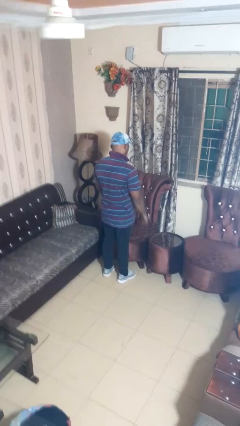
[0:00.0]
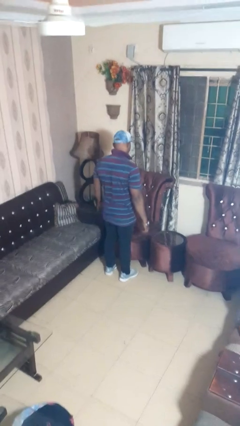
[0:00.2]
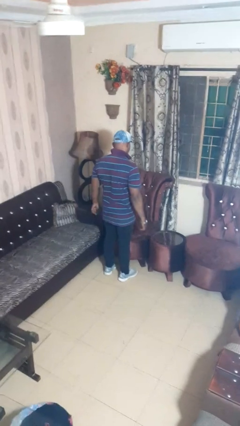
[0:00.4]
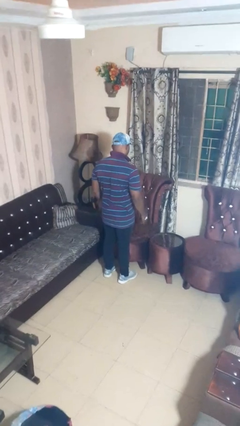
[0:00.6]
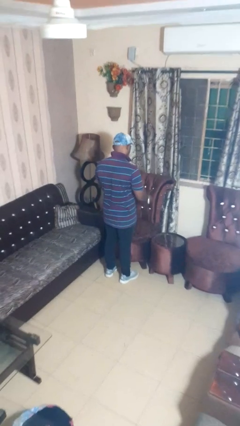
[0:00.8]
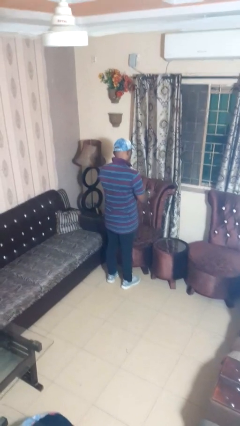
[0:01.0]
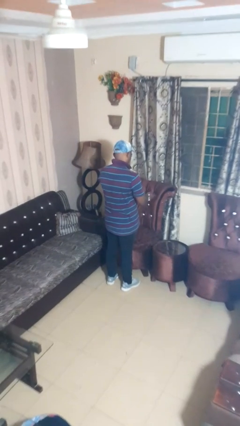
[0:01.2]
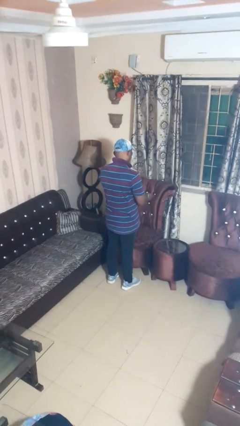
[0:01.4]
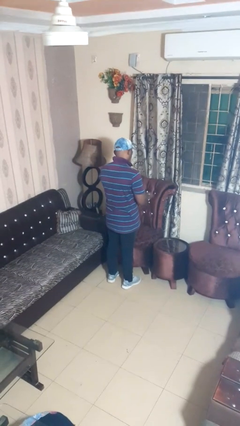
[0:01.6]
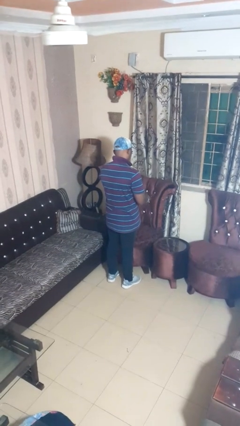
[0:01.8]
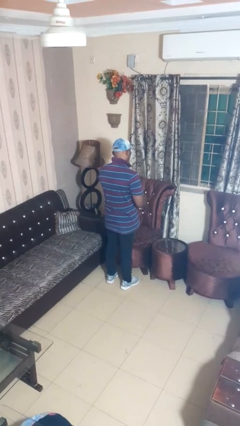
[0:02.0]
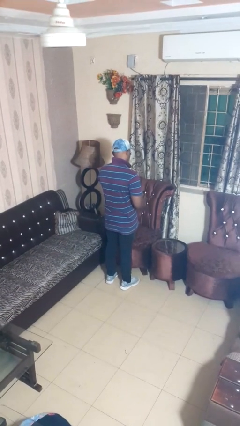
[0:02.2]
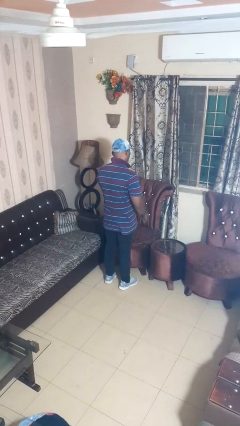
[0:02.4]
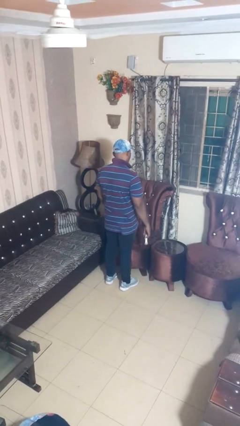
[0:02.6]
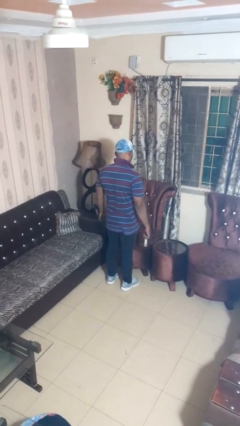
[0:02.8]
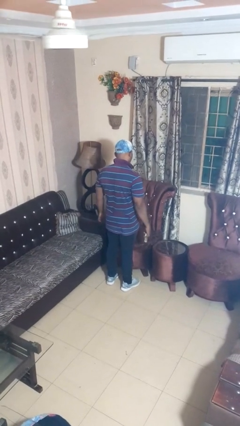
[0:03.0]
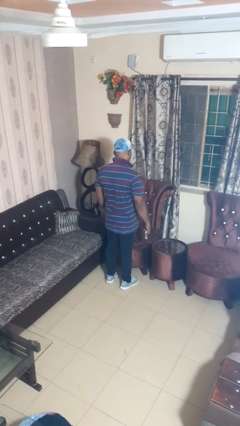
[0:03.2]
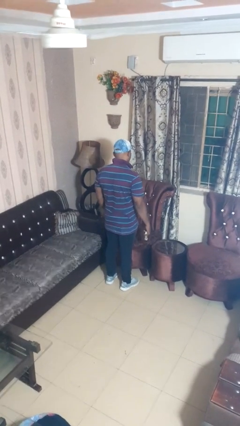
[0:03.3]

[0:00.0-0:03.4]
person takes off wristwatch

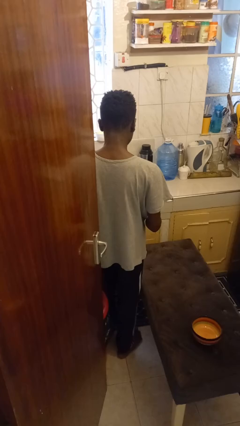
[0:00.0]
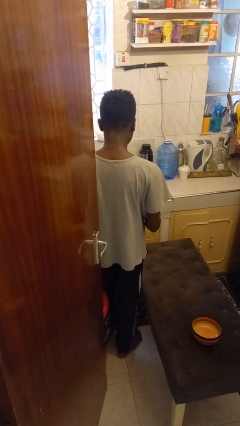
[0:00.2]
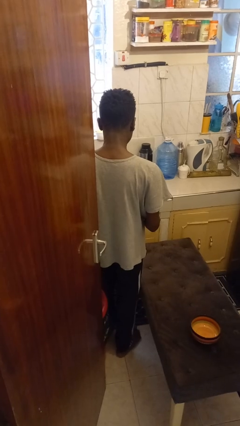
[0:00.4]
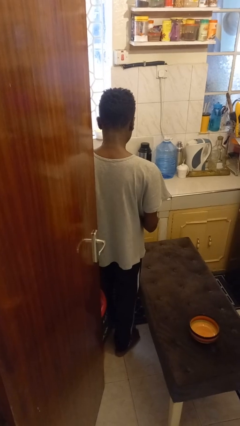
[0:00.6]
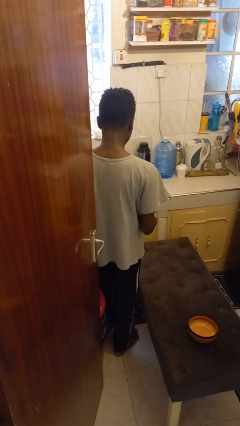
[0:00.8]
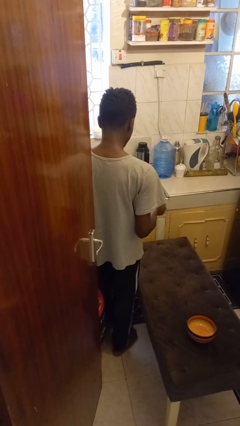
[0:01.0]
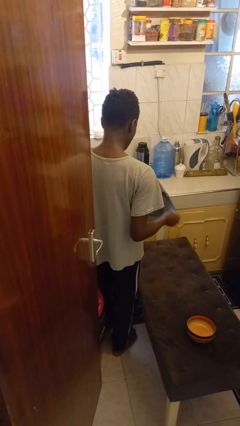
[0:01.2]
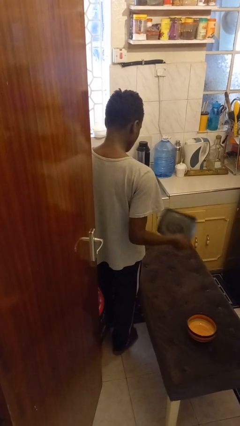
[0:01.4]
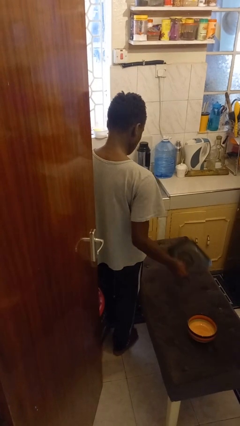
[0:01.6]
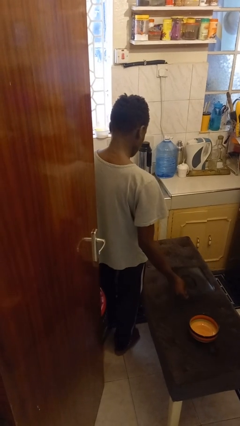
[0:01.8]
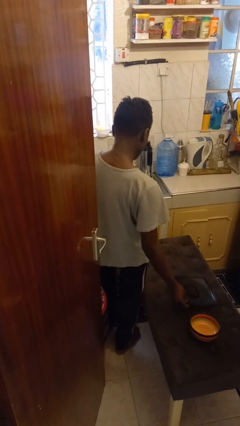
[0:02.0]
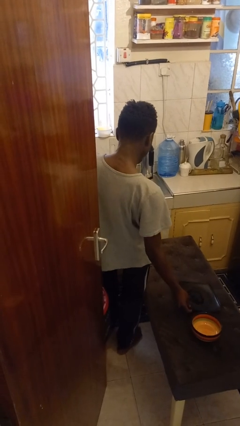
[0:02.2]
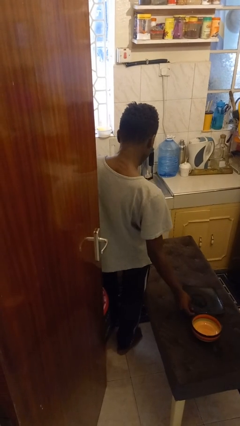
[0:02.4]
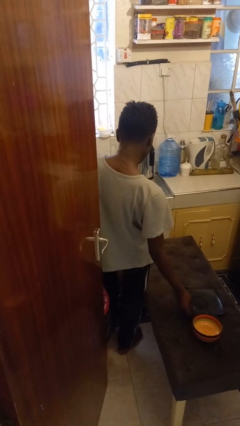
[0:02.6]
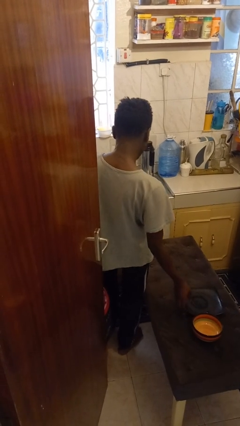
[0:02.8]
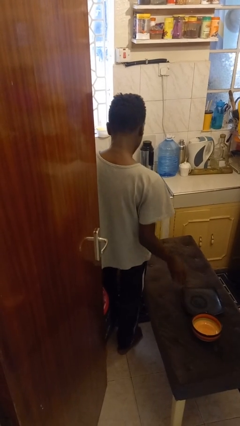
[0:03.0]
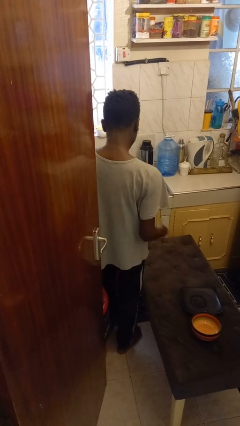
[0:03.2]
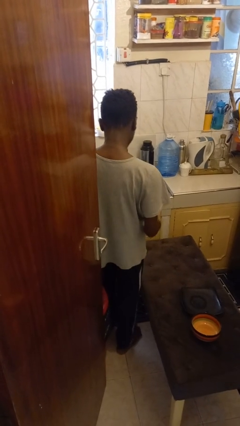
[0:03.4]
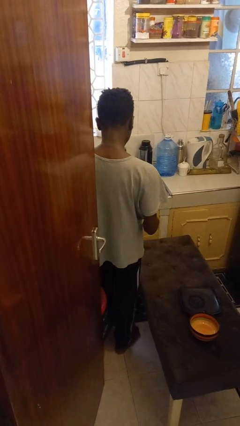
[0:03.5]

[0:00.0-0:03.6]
person sets table

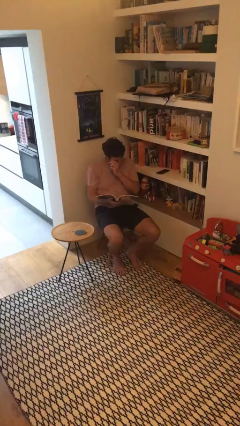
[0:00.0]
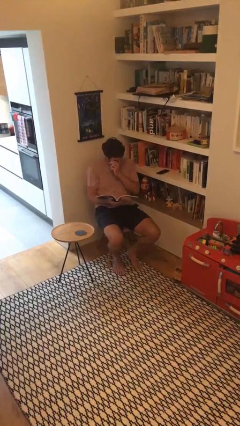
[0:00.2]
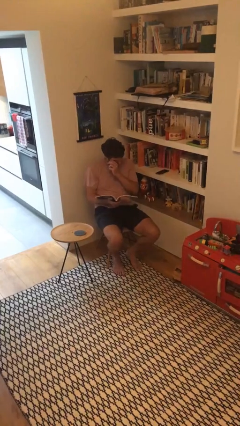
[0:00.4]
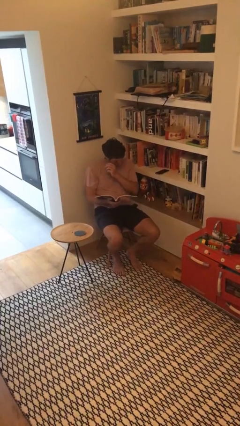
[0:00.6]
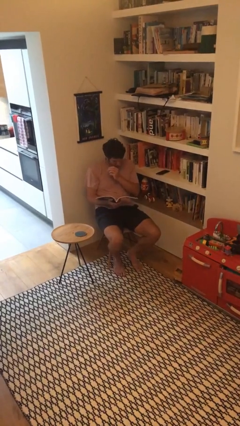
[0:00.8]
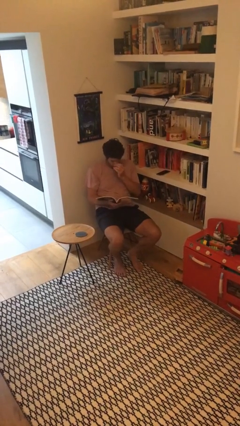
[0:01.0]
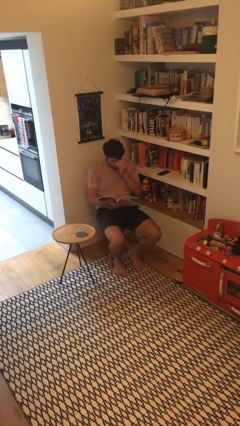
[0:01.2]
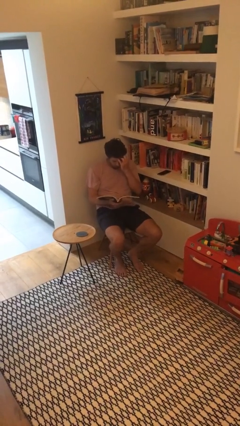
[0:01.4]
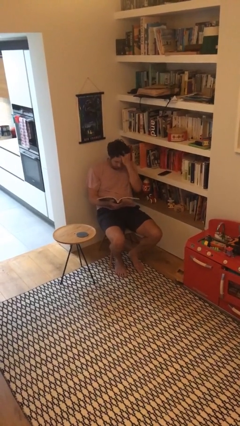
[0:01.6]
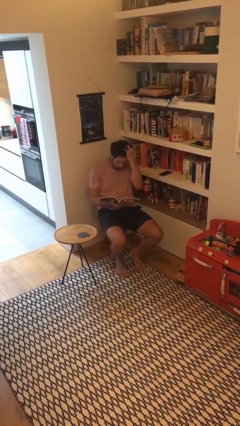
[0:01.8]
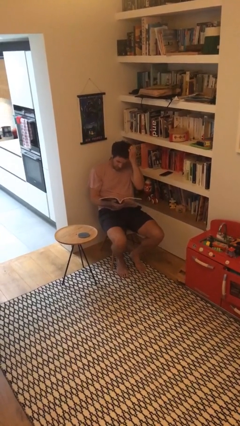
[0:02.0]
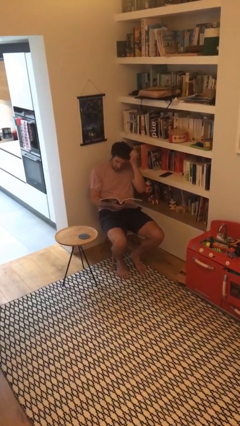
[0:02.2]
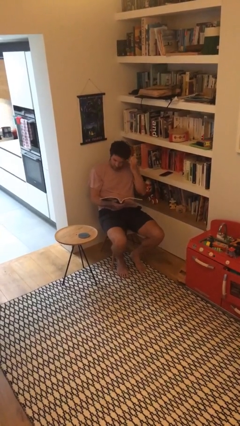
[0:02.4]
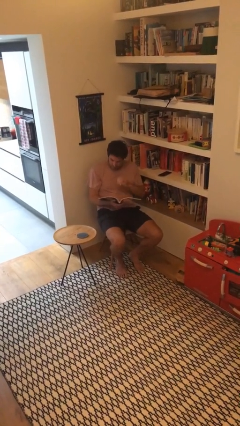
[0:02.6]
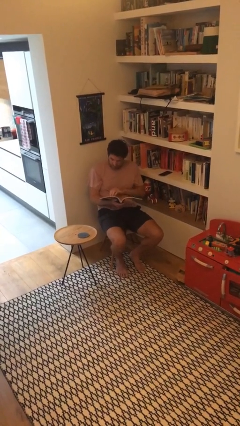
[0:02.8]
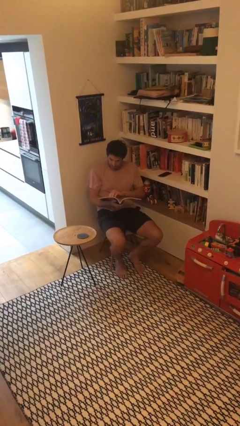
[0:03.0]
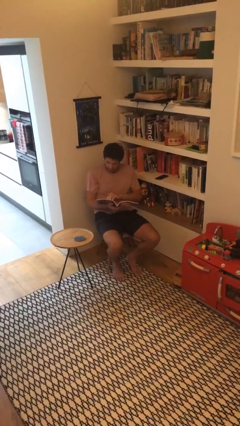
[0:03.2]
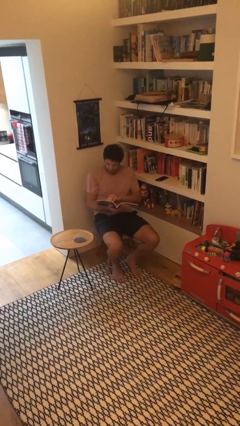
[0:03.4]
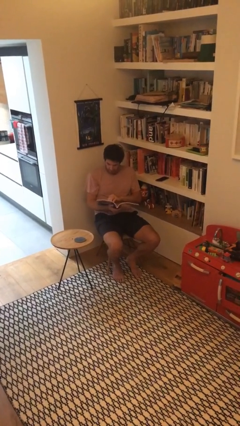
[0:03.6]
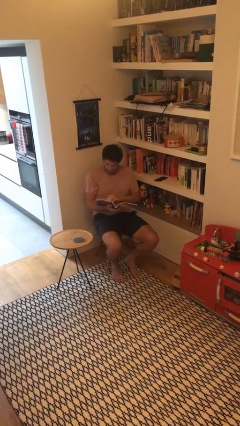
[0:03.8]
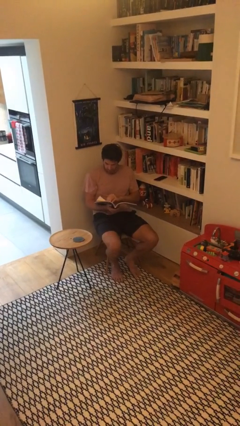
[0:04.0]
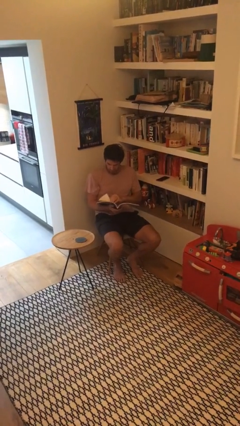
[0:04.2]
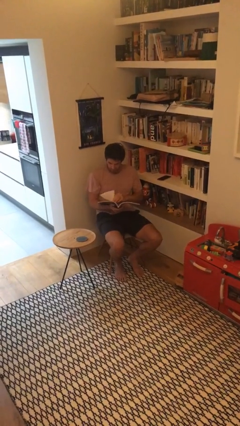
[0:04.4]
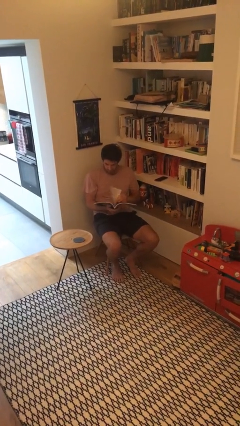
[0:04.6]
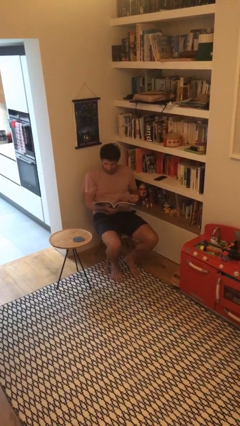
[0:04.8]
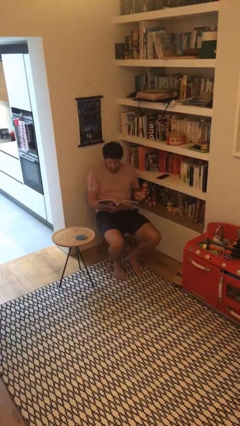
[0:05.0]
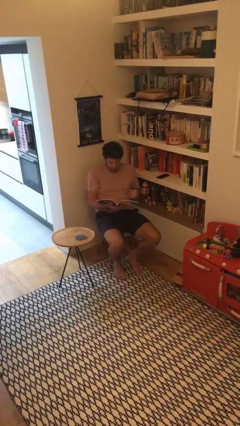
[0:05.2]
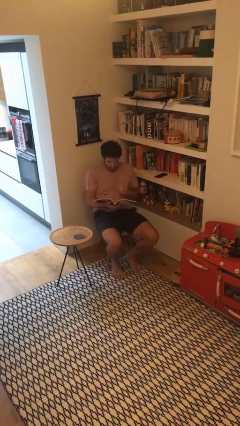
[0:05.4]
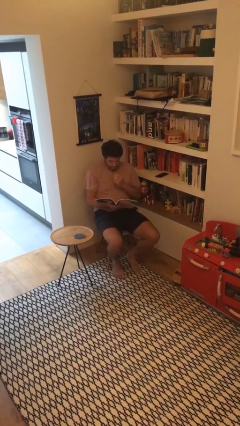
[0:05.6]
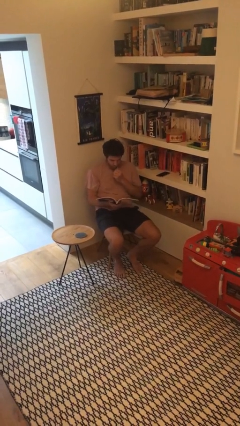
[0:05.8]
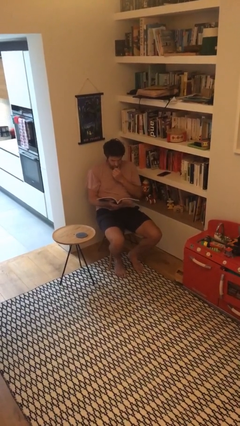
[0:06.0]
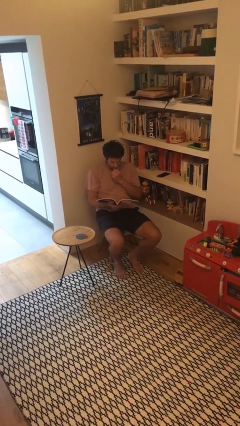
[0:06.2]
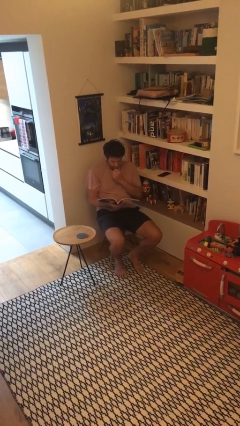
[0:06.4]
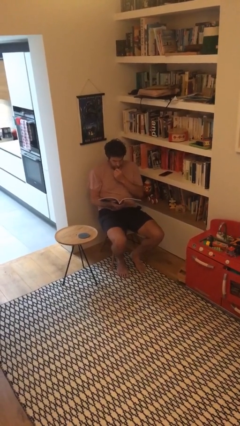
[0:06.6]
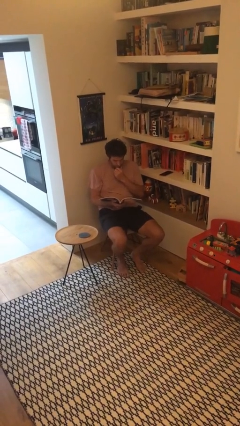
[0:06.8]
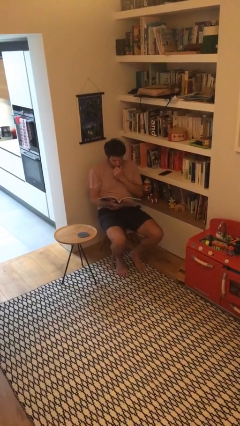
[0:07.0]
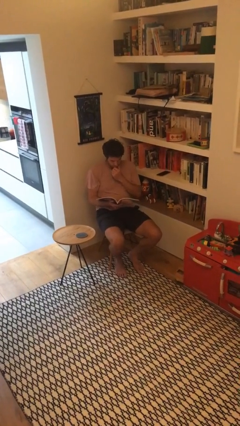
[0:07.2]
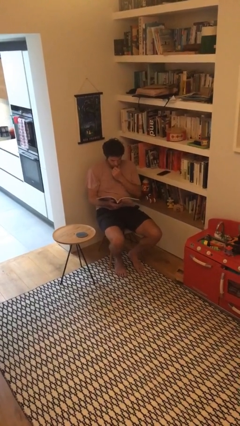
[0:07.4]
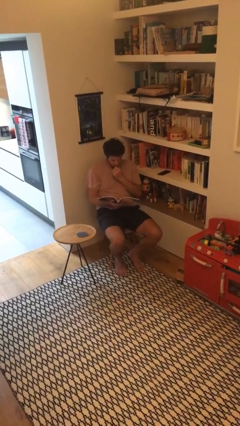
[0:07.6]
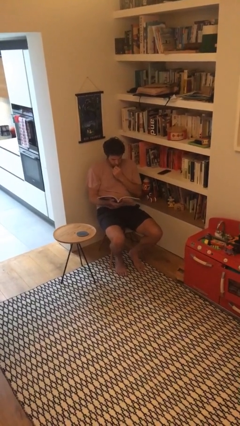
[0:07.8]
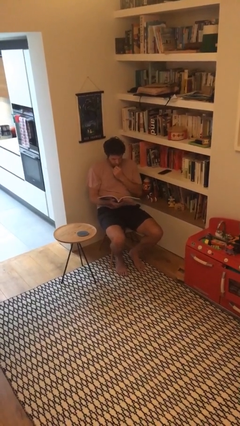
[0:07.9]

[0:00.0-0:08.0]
person reads document

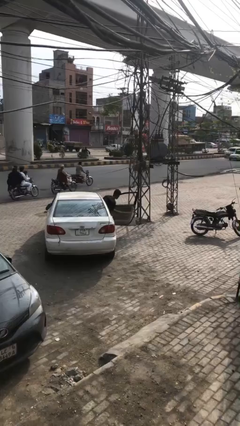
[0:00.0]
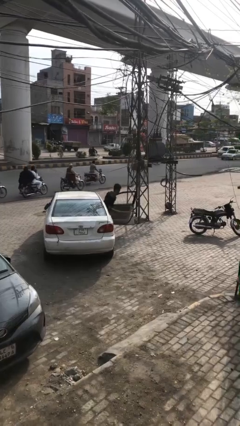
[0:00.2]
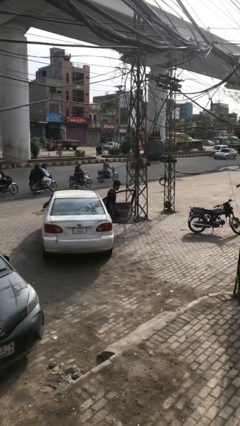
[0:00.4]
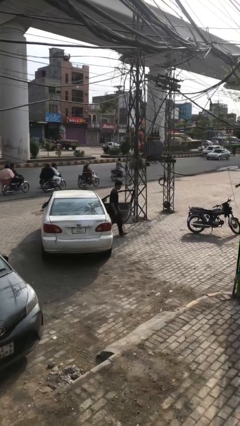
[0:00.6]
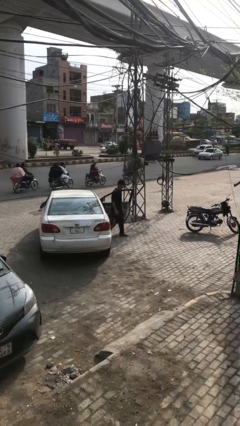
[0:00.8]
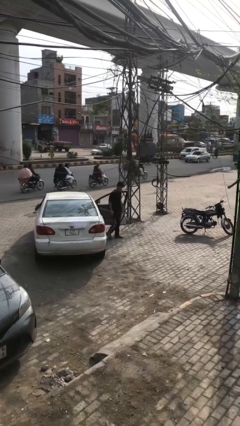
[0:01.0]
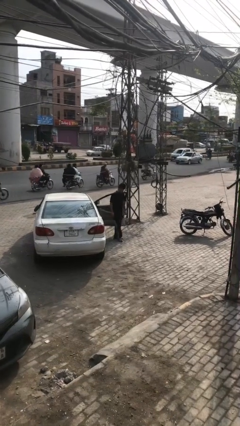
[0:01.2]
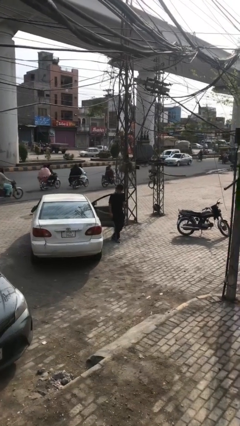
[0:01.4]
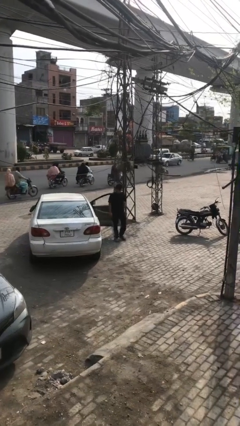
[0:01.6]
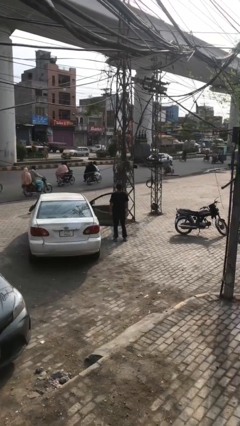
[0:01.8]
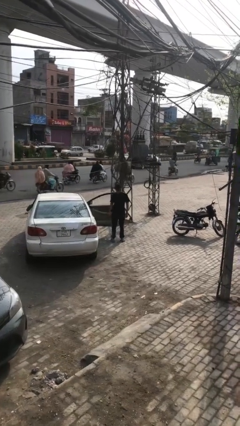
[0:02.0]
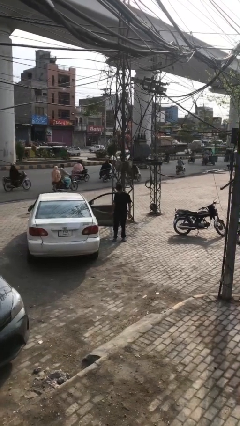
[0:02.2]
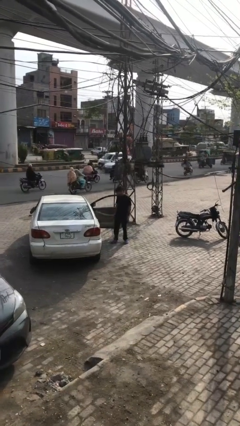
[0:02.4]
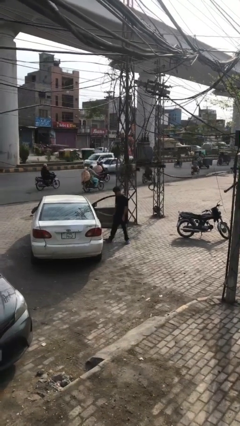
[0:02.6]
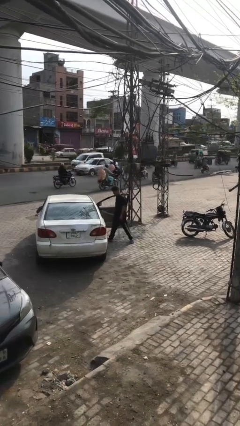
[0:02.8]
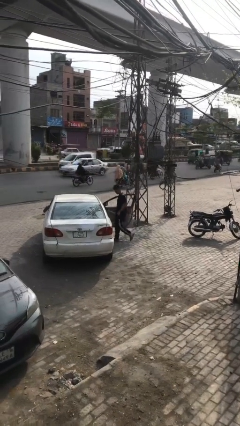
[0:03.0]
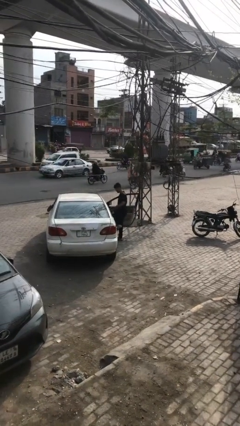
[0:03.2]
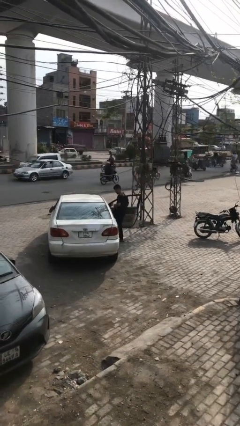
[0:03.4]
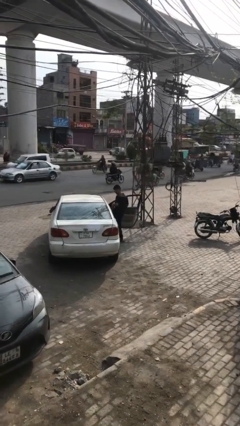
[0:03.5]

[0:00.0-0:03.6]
person exits car
